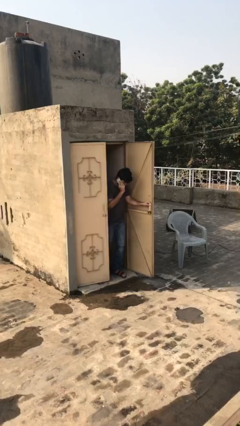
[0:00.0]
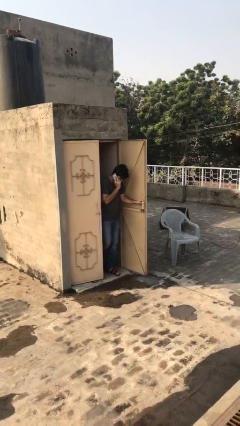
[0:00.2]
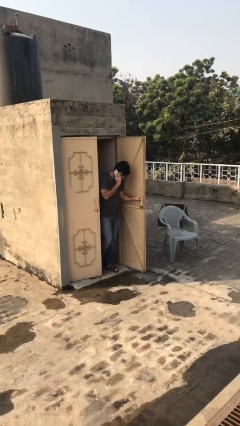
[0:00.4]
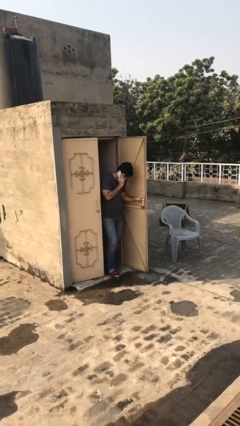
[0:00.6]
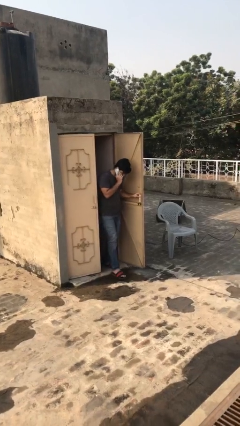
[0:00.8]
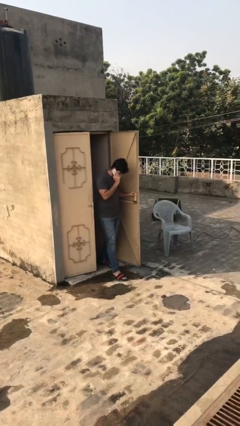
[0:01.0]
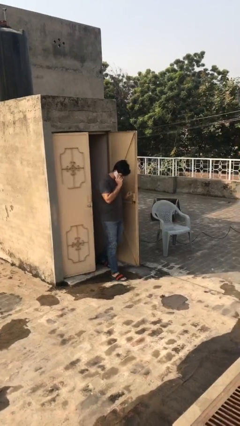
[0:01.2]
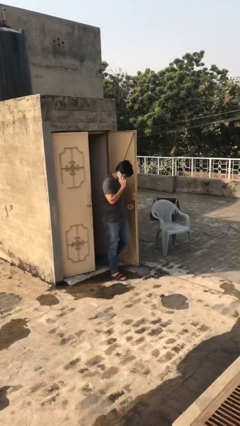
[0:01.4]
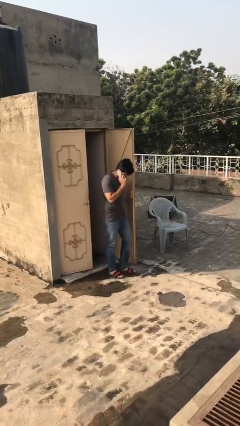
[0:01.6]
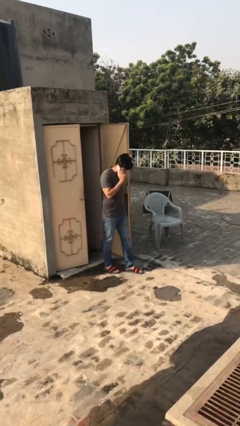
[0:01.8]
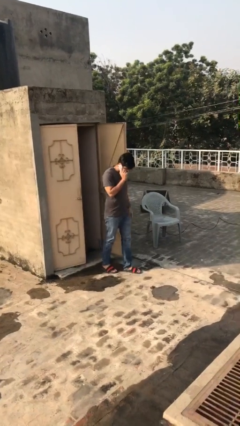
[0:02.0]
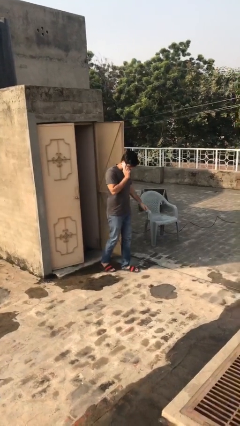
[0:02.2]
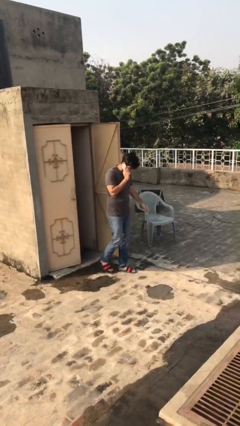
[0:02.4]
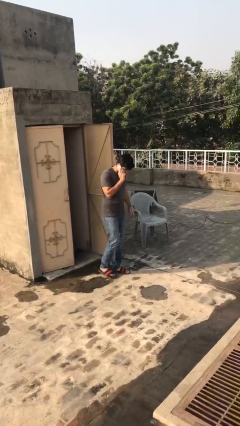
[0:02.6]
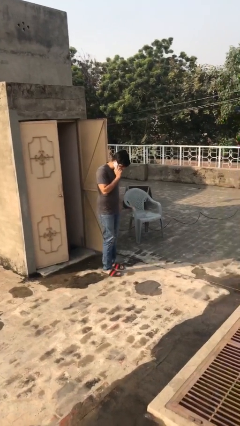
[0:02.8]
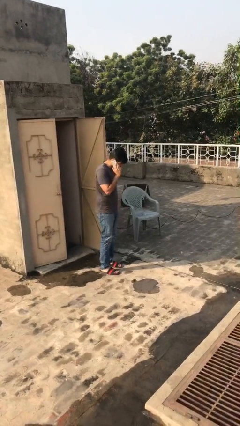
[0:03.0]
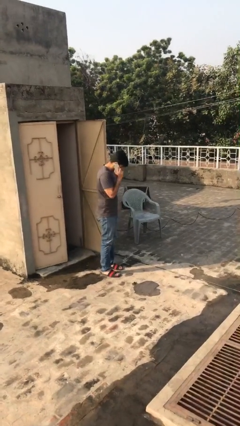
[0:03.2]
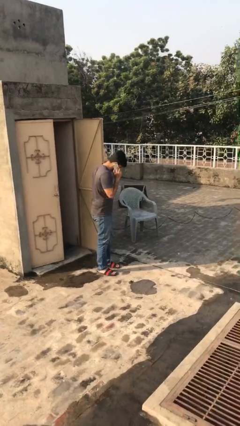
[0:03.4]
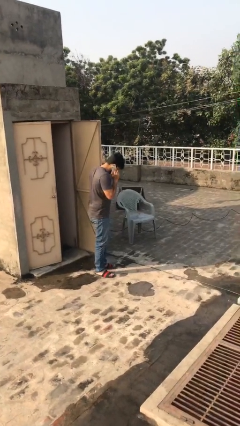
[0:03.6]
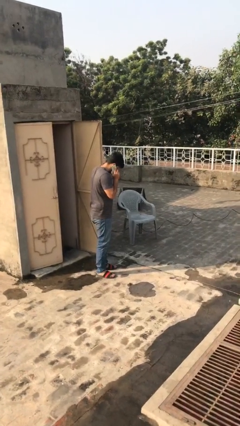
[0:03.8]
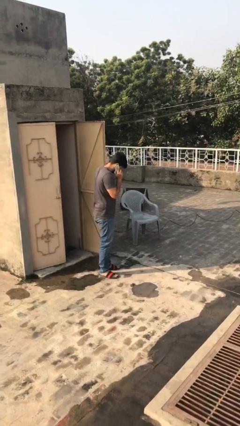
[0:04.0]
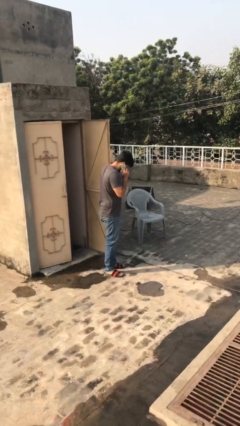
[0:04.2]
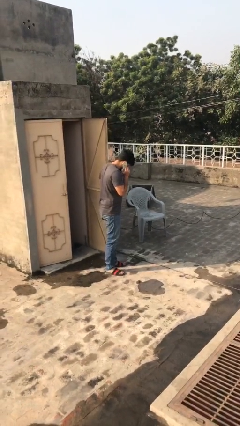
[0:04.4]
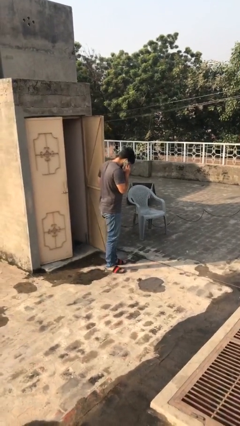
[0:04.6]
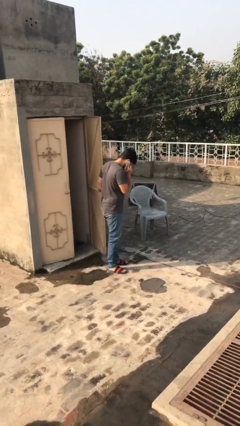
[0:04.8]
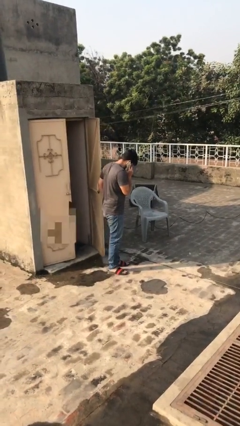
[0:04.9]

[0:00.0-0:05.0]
person enters scene through structure

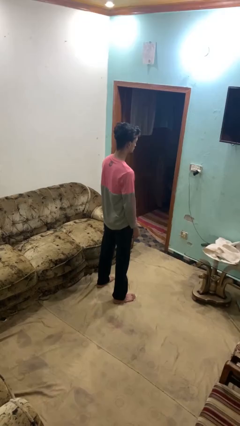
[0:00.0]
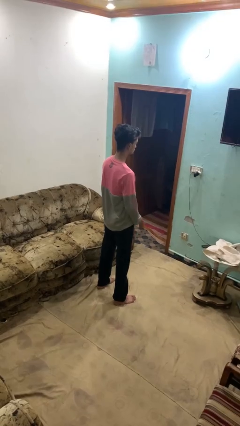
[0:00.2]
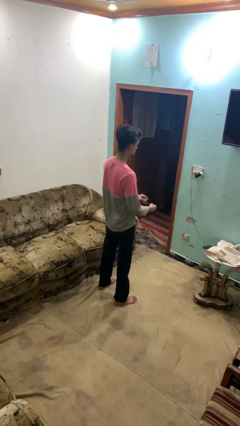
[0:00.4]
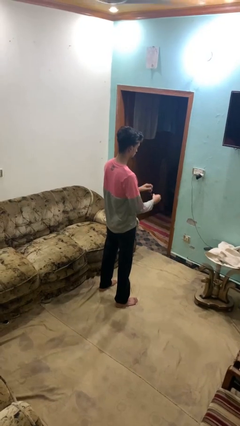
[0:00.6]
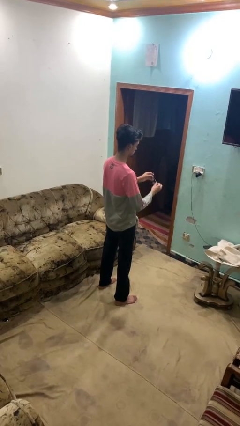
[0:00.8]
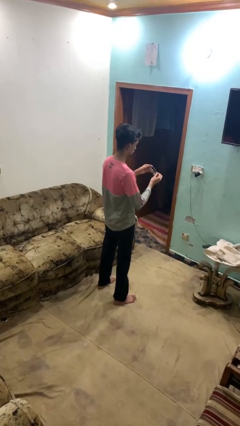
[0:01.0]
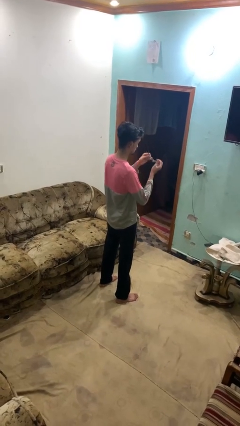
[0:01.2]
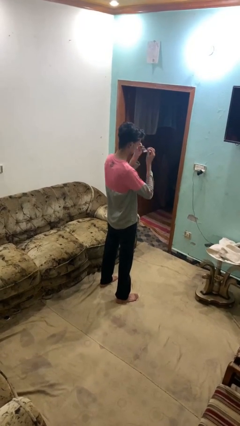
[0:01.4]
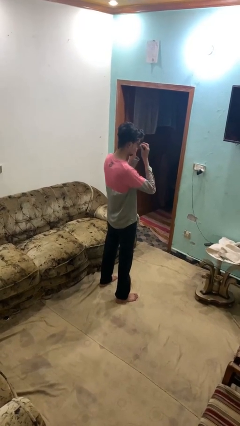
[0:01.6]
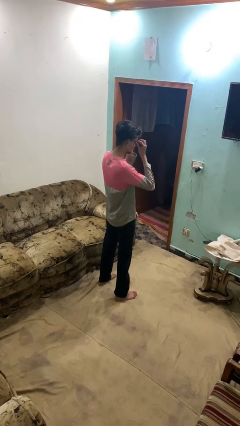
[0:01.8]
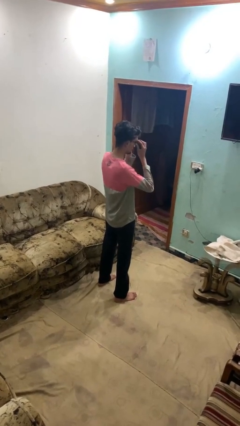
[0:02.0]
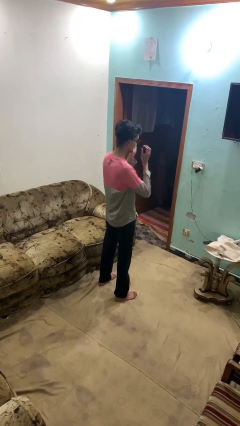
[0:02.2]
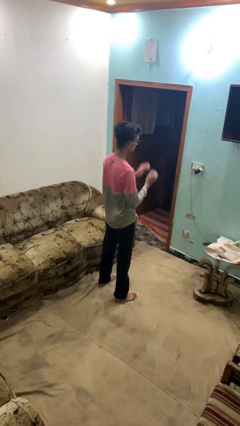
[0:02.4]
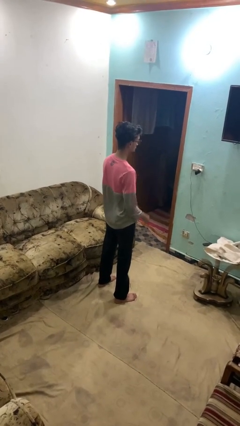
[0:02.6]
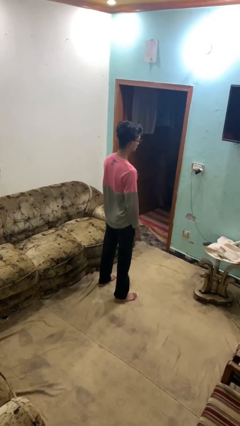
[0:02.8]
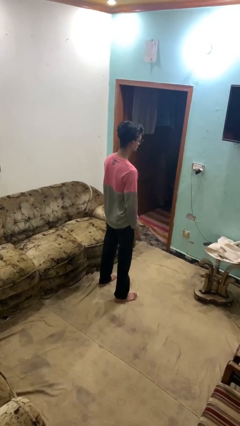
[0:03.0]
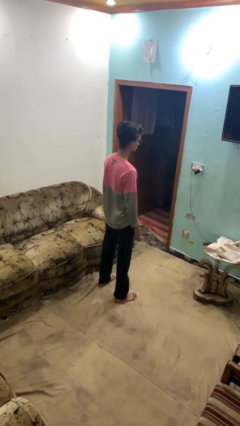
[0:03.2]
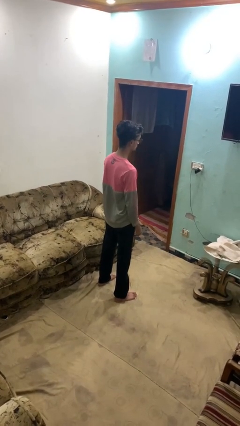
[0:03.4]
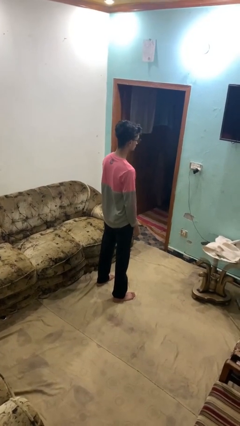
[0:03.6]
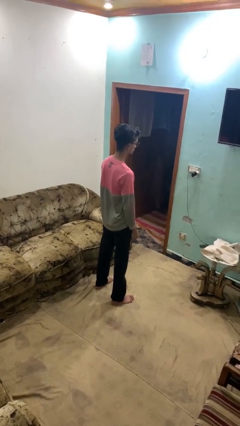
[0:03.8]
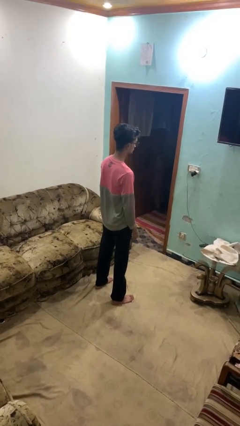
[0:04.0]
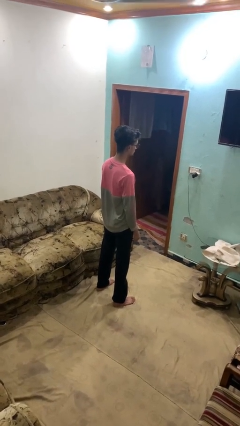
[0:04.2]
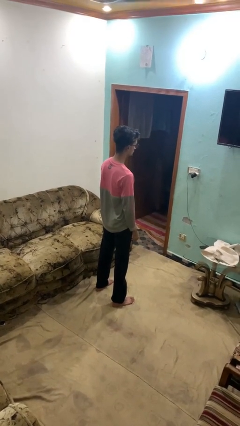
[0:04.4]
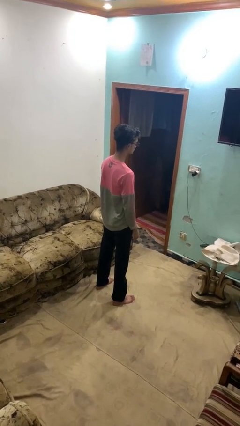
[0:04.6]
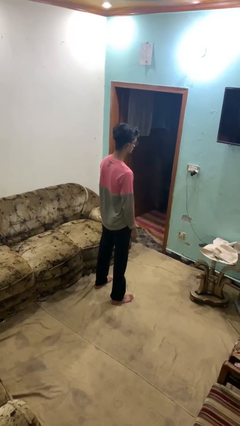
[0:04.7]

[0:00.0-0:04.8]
person puts on glasses

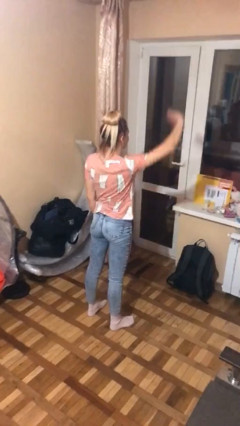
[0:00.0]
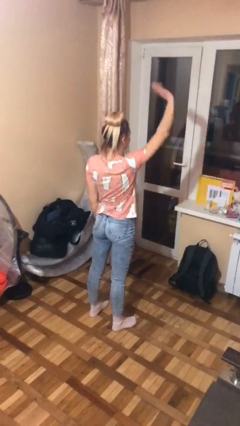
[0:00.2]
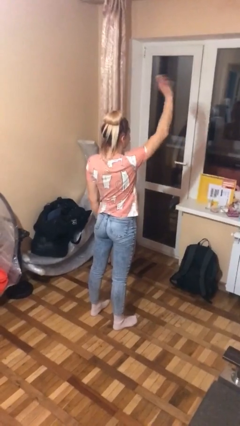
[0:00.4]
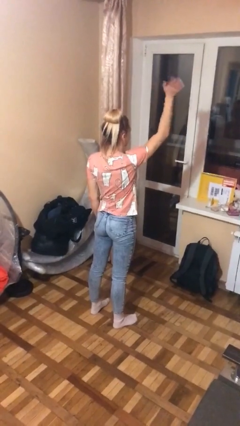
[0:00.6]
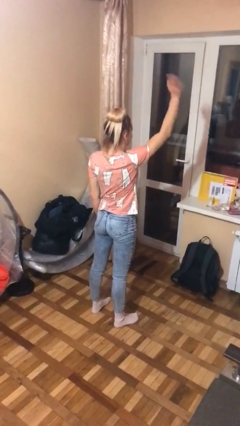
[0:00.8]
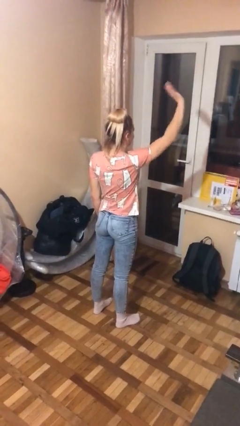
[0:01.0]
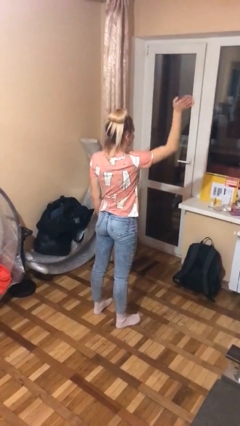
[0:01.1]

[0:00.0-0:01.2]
person salutes

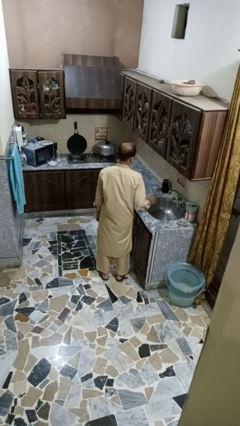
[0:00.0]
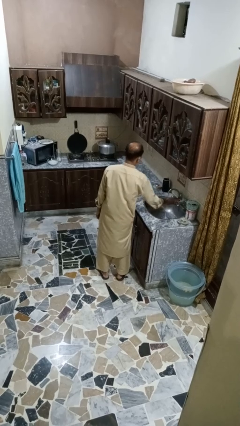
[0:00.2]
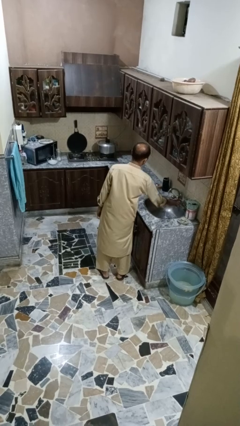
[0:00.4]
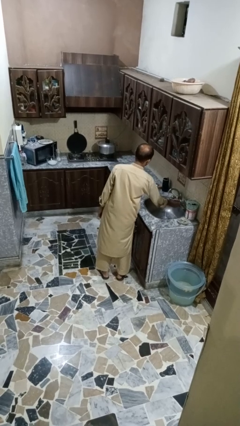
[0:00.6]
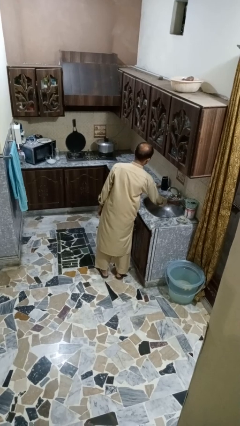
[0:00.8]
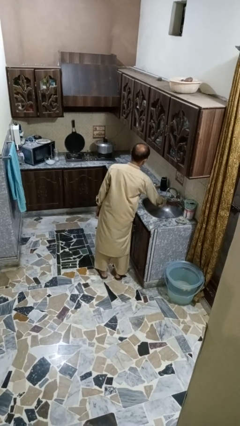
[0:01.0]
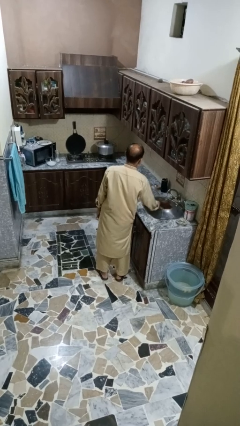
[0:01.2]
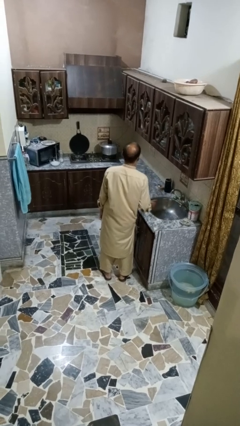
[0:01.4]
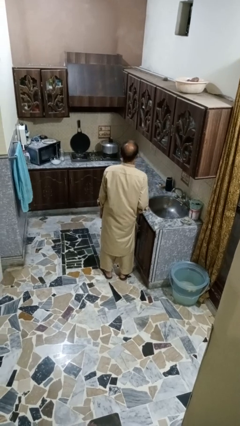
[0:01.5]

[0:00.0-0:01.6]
person turns off faucet
